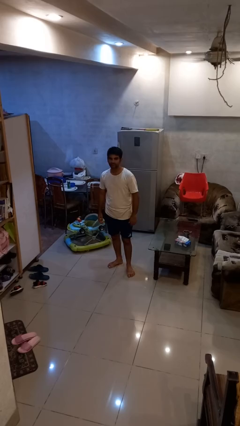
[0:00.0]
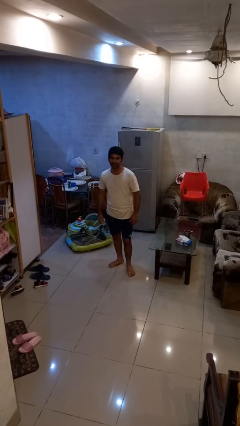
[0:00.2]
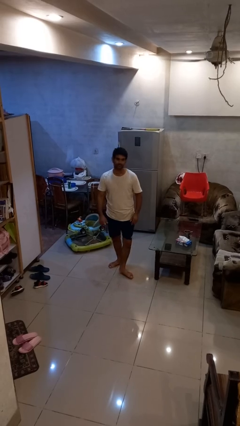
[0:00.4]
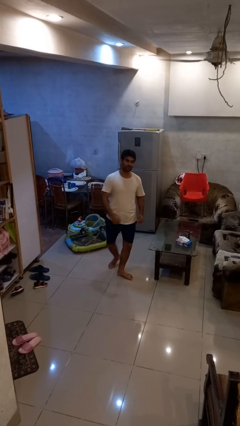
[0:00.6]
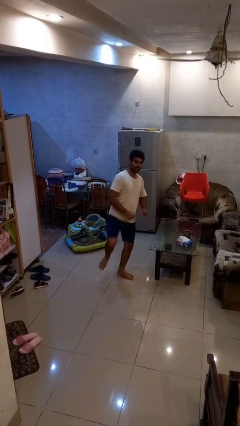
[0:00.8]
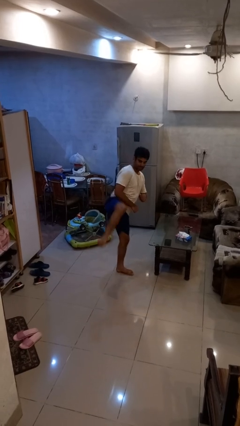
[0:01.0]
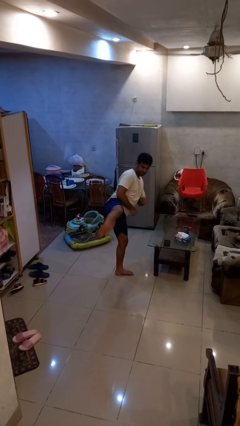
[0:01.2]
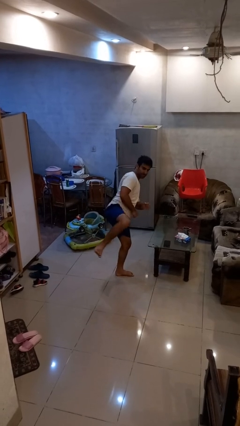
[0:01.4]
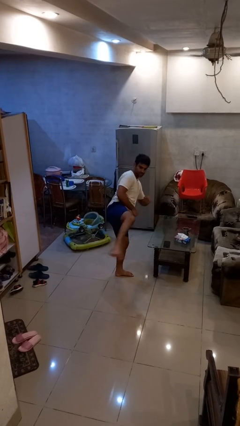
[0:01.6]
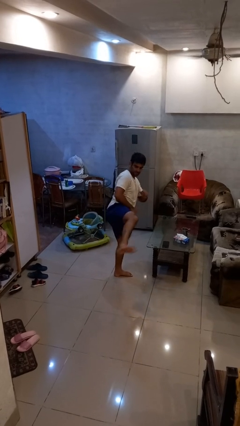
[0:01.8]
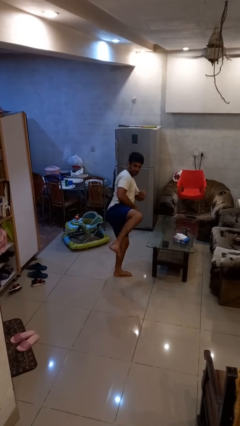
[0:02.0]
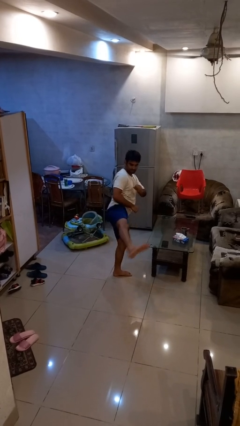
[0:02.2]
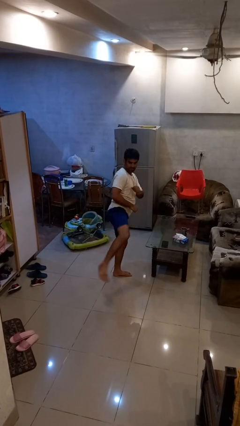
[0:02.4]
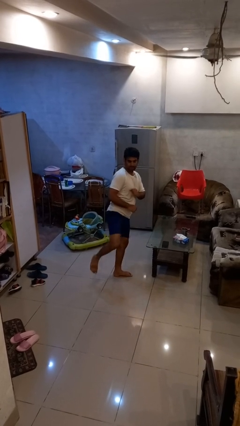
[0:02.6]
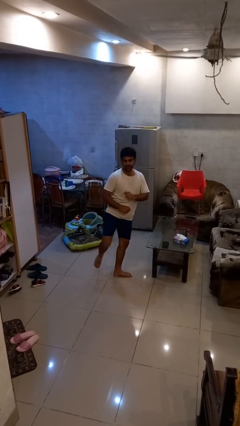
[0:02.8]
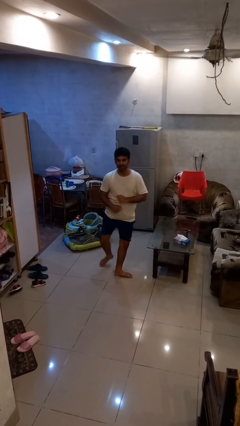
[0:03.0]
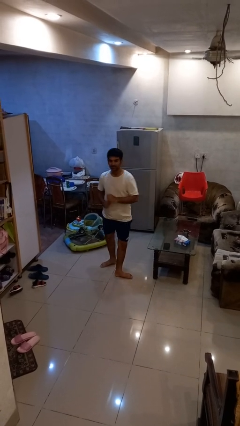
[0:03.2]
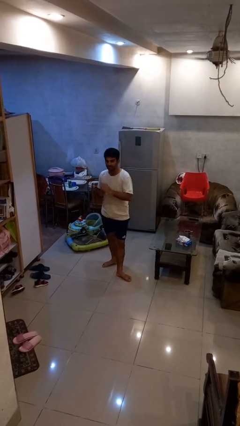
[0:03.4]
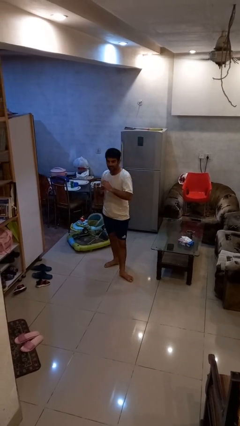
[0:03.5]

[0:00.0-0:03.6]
person karate kicks

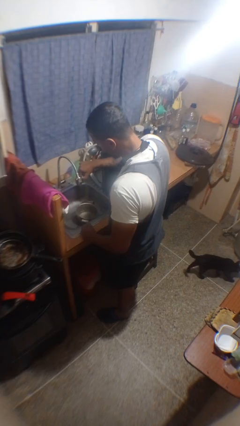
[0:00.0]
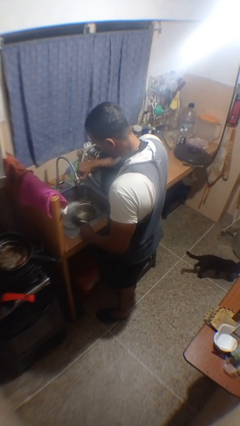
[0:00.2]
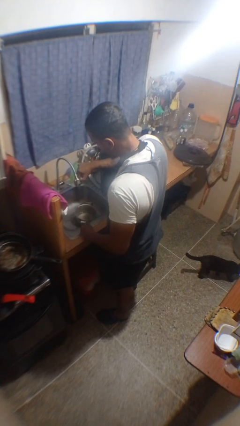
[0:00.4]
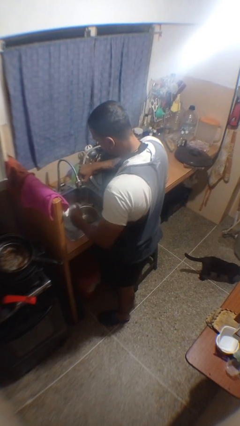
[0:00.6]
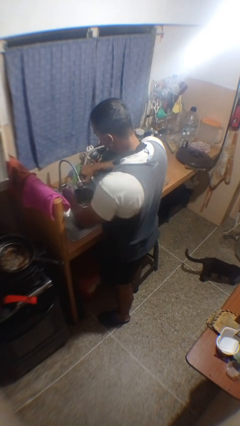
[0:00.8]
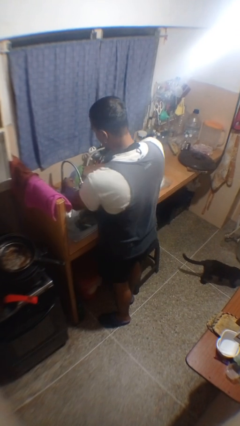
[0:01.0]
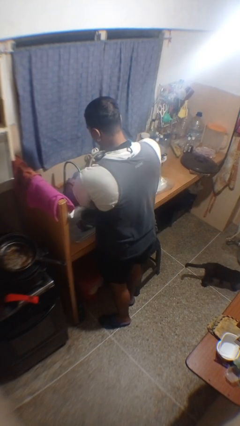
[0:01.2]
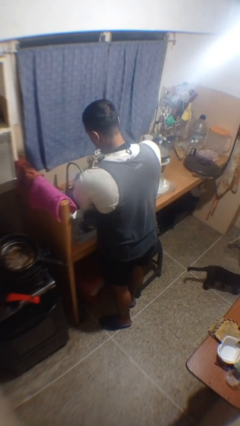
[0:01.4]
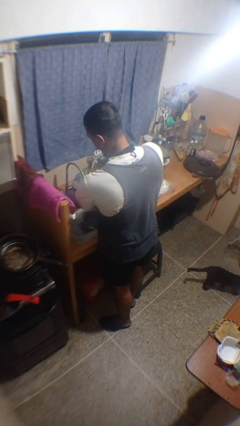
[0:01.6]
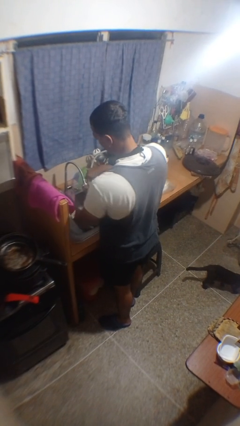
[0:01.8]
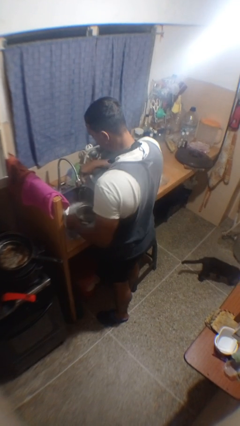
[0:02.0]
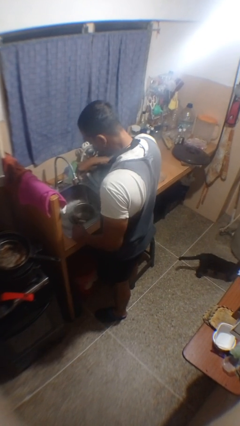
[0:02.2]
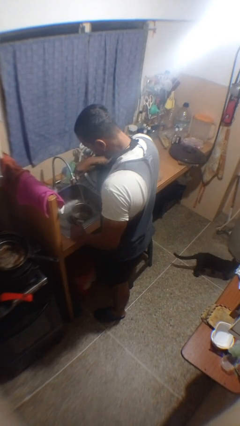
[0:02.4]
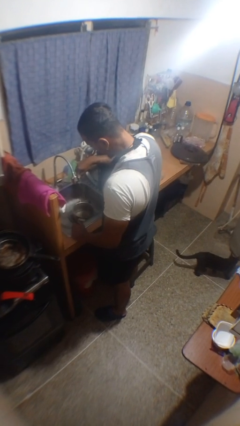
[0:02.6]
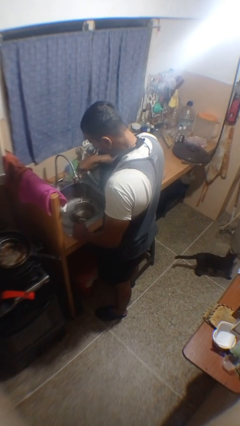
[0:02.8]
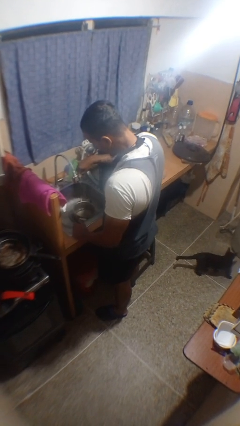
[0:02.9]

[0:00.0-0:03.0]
person turns on faucet

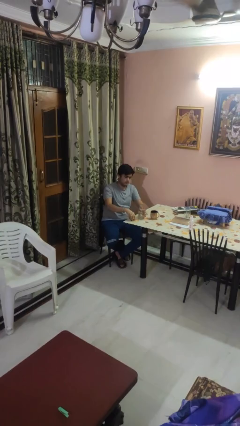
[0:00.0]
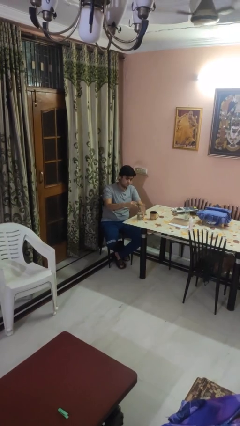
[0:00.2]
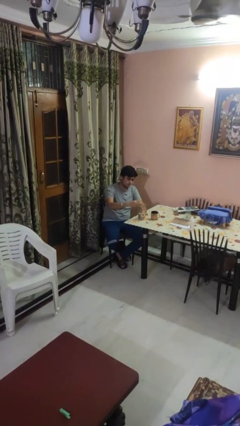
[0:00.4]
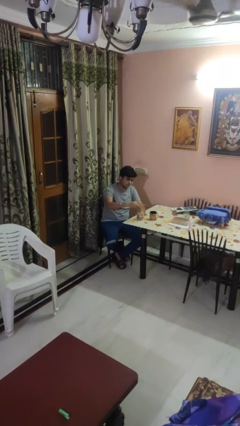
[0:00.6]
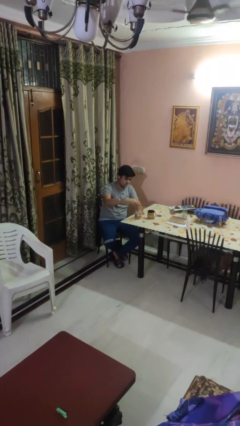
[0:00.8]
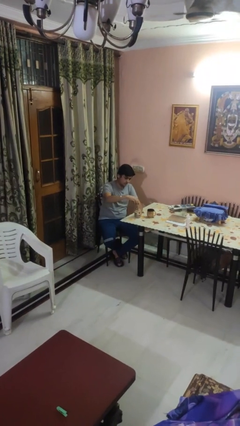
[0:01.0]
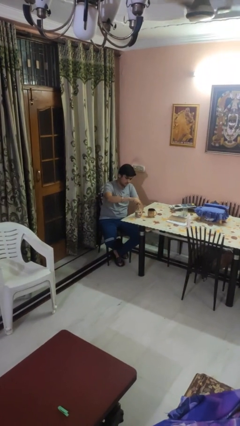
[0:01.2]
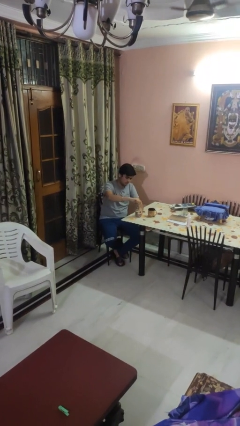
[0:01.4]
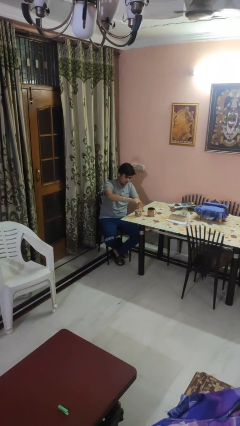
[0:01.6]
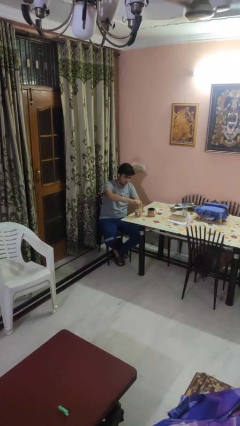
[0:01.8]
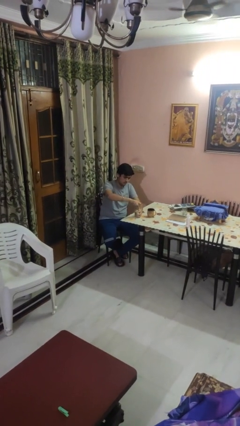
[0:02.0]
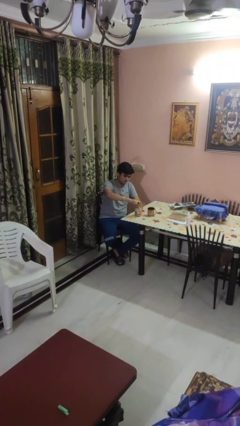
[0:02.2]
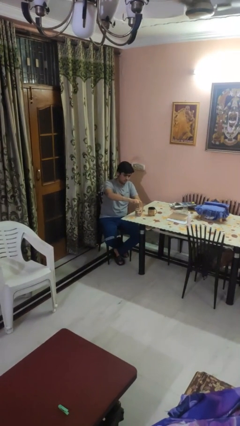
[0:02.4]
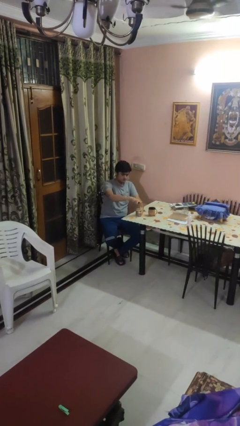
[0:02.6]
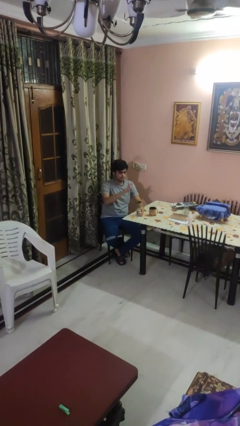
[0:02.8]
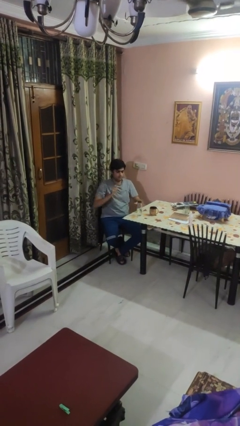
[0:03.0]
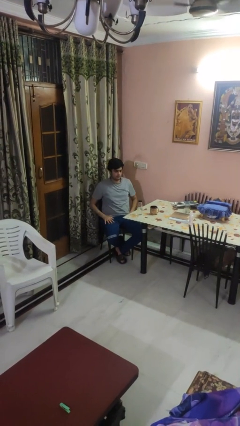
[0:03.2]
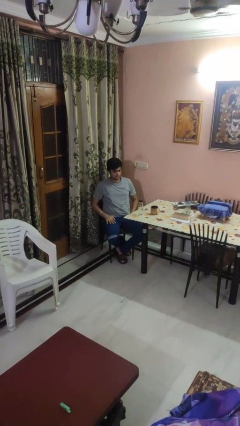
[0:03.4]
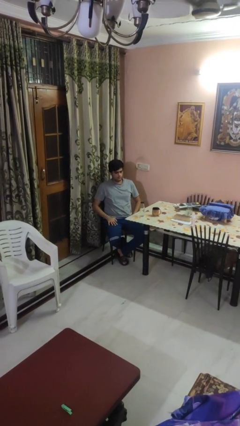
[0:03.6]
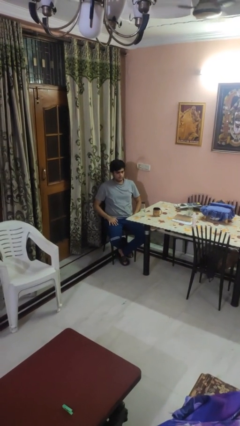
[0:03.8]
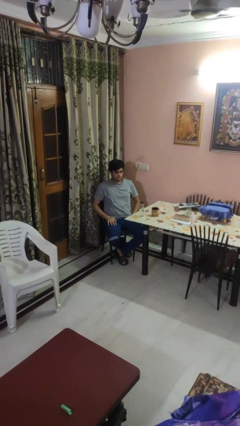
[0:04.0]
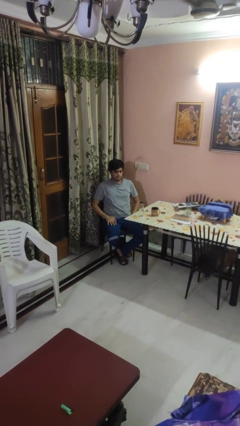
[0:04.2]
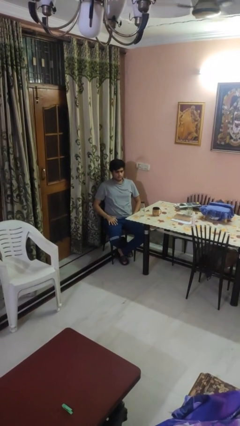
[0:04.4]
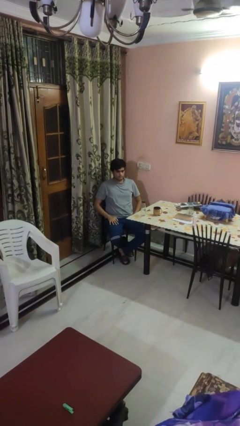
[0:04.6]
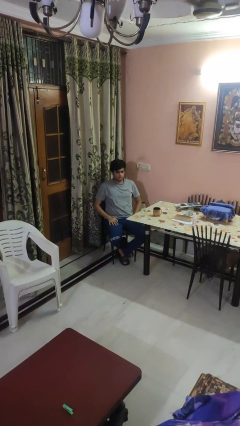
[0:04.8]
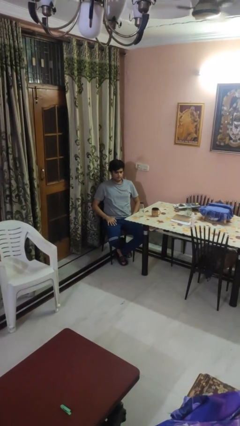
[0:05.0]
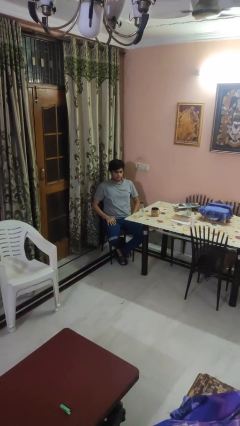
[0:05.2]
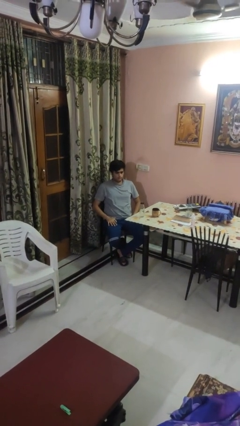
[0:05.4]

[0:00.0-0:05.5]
person screws lid to bottle

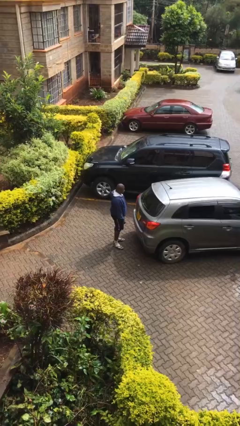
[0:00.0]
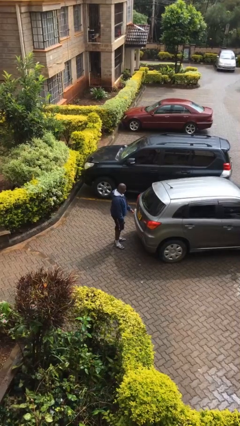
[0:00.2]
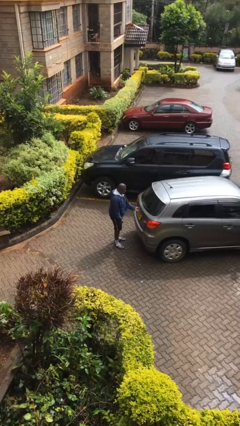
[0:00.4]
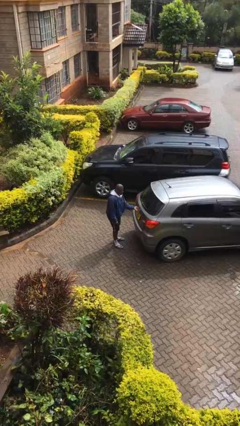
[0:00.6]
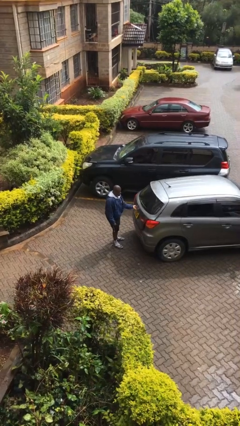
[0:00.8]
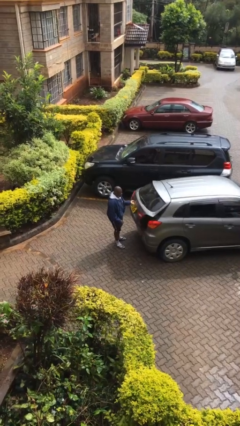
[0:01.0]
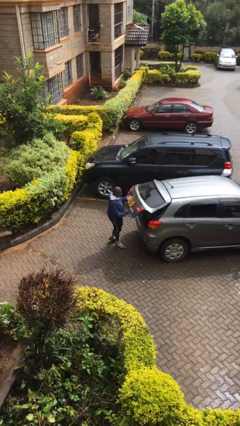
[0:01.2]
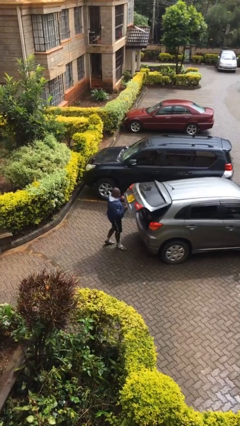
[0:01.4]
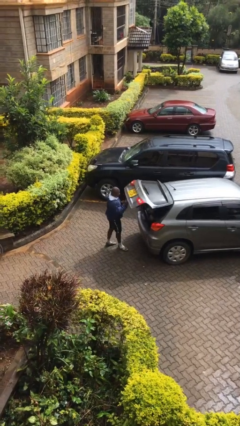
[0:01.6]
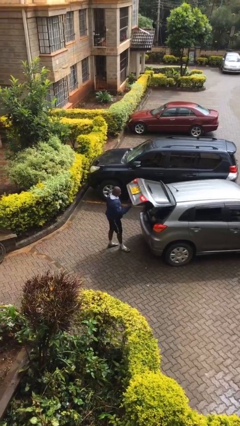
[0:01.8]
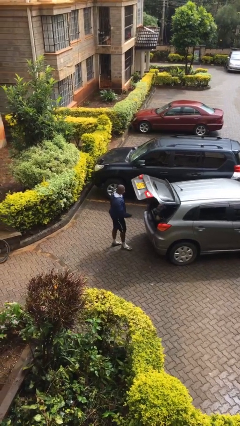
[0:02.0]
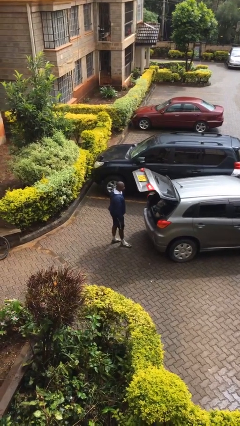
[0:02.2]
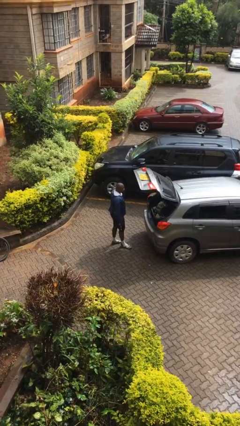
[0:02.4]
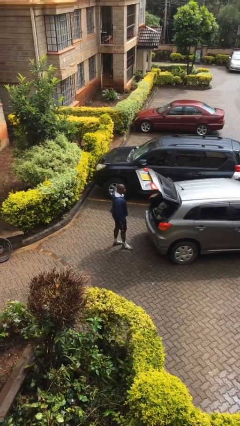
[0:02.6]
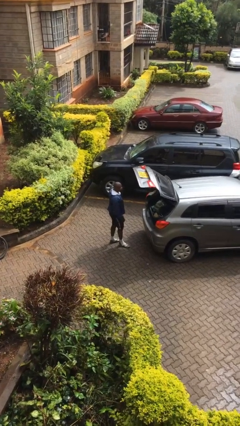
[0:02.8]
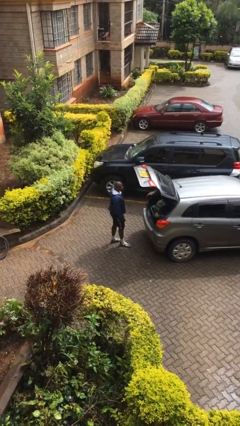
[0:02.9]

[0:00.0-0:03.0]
person opens car trunk

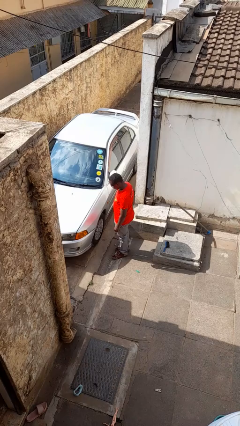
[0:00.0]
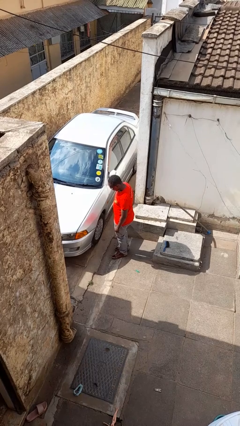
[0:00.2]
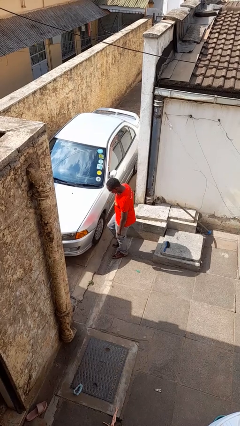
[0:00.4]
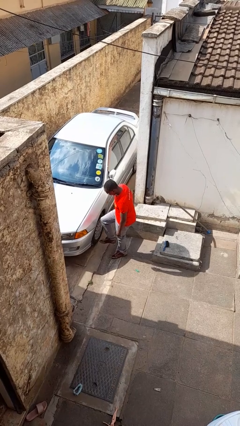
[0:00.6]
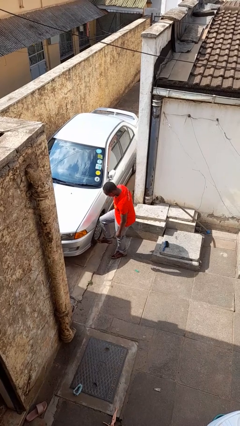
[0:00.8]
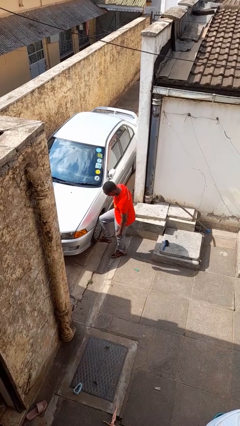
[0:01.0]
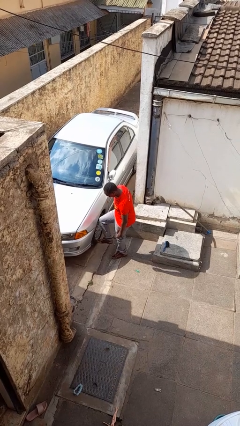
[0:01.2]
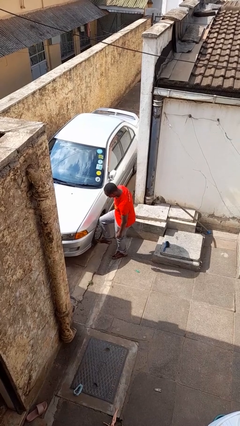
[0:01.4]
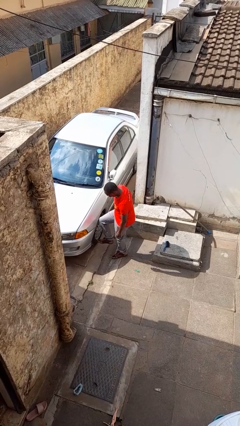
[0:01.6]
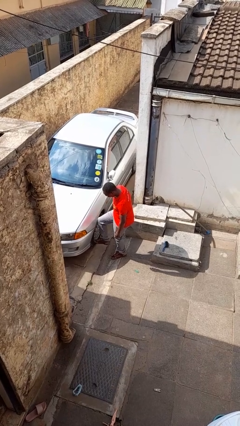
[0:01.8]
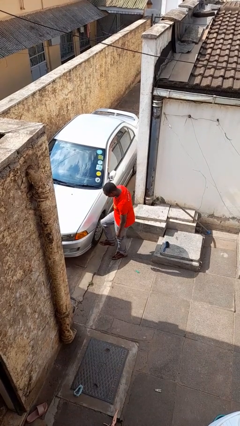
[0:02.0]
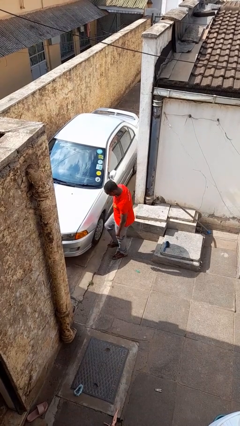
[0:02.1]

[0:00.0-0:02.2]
person kicks car tires
